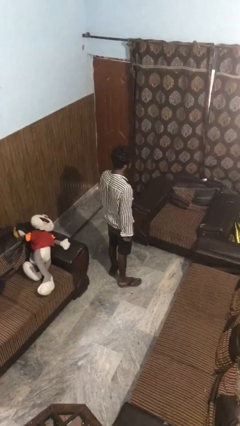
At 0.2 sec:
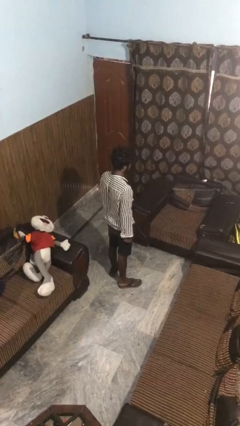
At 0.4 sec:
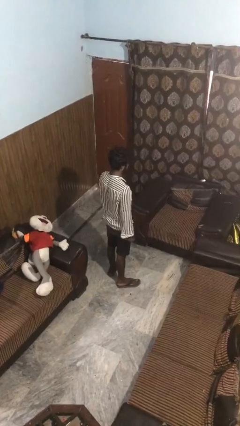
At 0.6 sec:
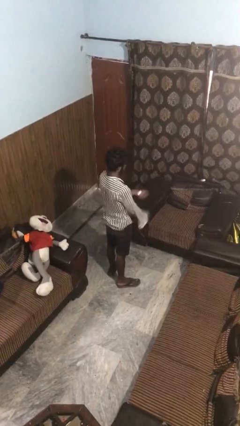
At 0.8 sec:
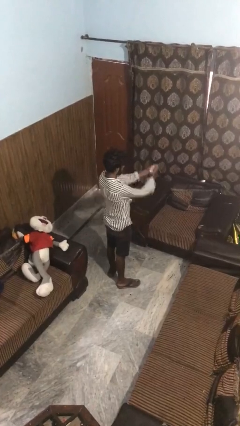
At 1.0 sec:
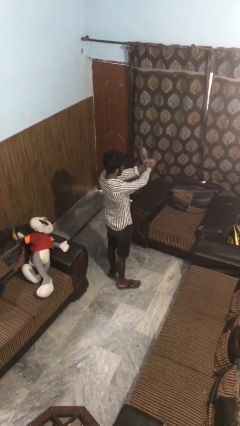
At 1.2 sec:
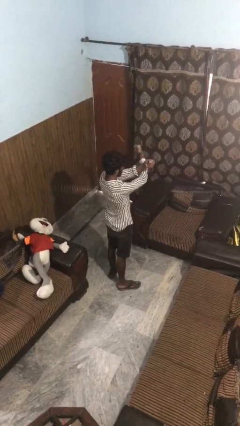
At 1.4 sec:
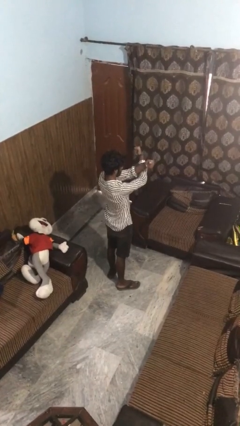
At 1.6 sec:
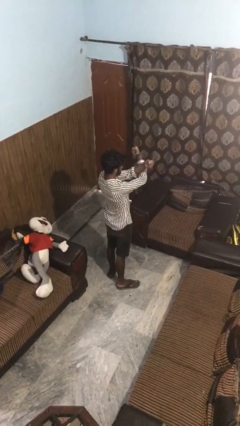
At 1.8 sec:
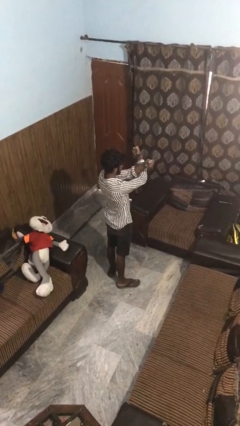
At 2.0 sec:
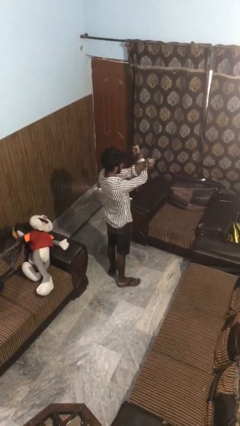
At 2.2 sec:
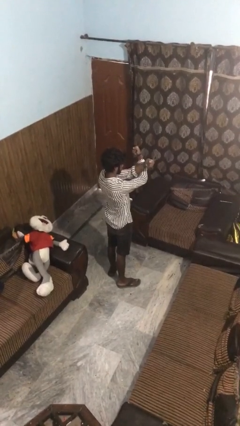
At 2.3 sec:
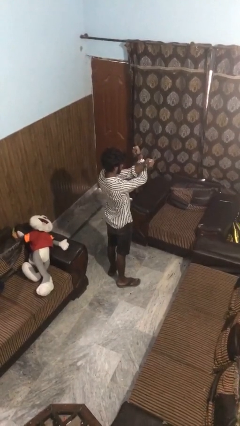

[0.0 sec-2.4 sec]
person gestures arms x

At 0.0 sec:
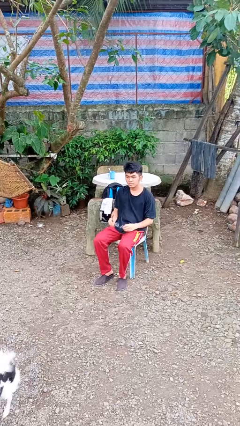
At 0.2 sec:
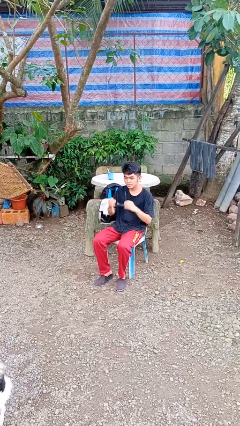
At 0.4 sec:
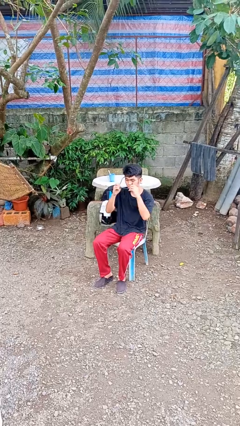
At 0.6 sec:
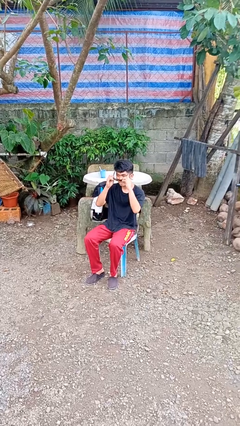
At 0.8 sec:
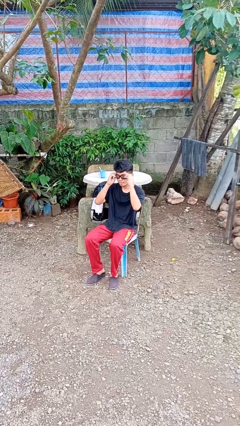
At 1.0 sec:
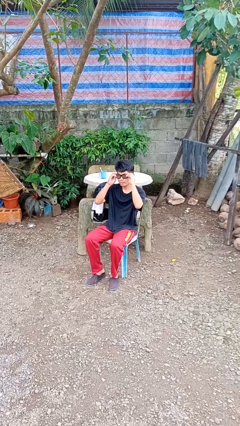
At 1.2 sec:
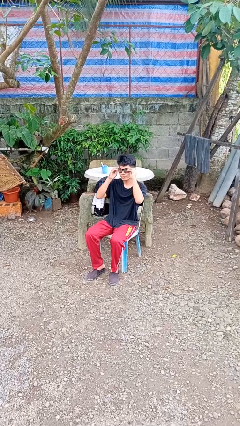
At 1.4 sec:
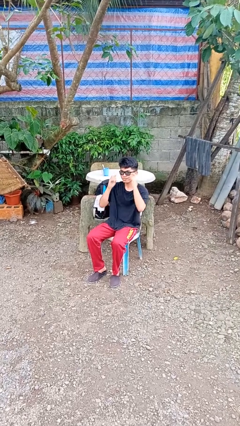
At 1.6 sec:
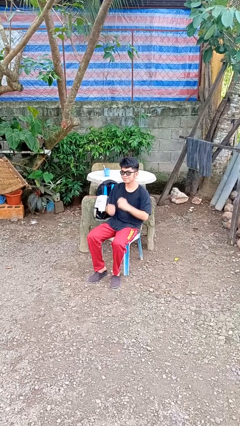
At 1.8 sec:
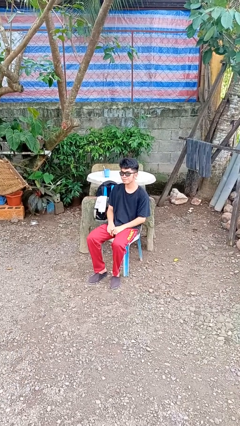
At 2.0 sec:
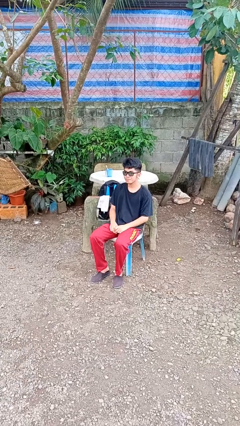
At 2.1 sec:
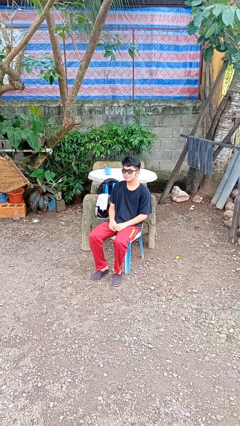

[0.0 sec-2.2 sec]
person puts on sunglasses

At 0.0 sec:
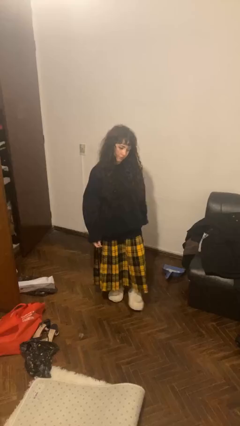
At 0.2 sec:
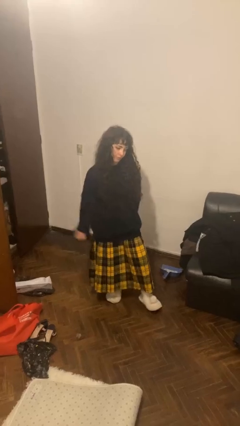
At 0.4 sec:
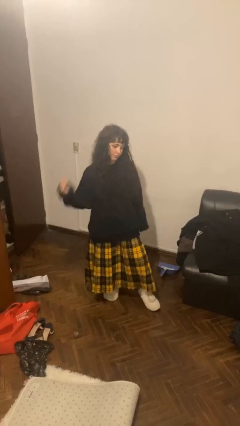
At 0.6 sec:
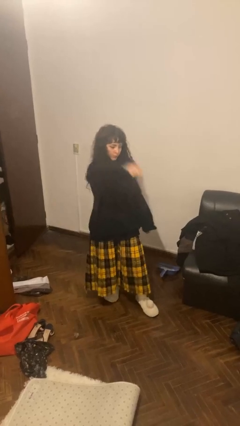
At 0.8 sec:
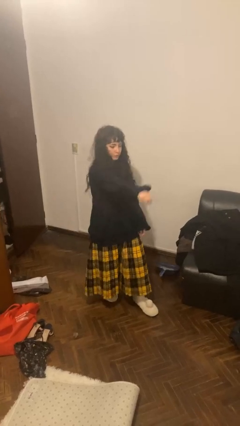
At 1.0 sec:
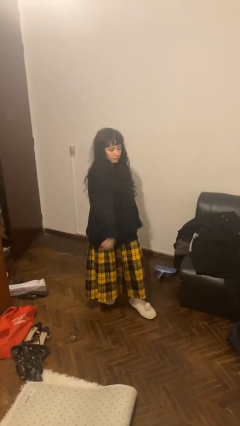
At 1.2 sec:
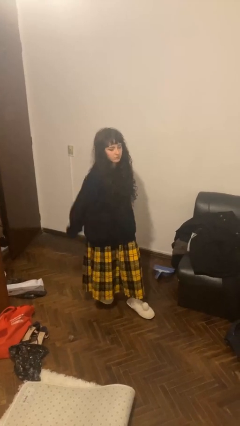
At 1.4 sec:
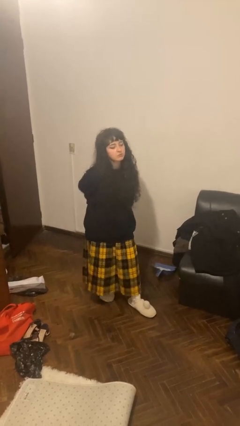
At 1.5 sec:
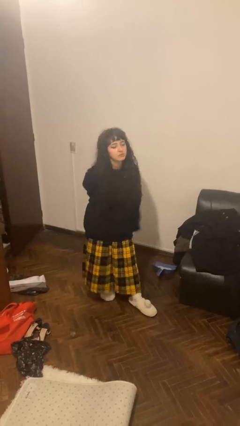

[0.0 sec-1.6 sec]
person punches

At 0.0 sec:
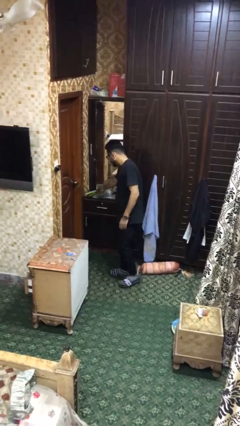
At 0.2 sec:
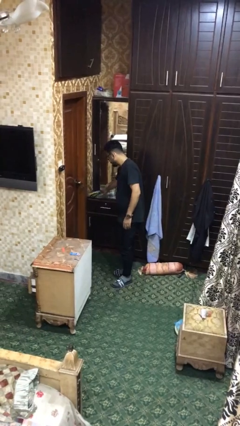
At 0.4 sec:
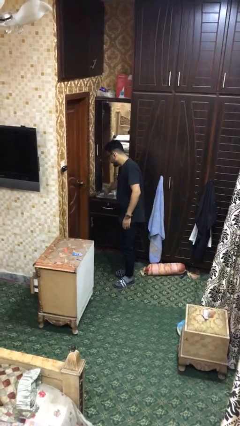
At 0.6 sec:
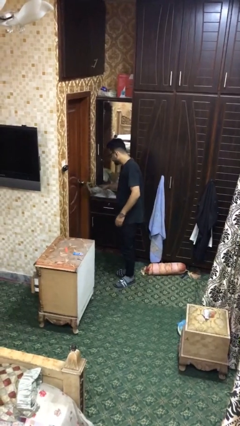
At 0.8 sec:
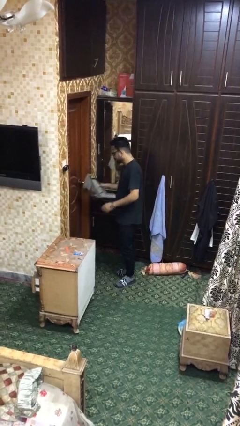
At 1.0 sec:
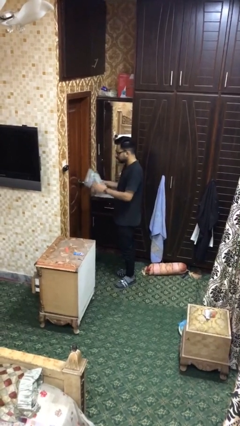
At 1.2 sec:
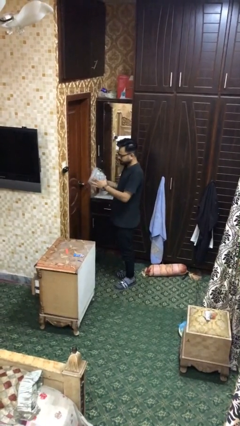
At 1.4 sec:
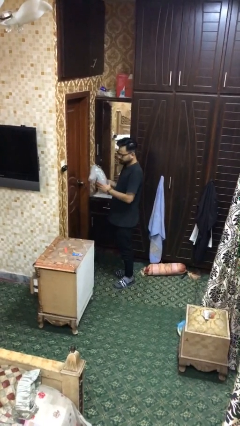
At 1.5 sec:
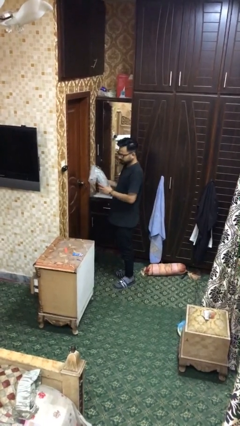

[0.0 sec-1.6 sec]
person picks up object from shelf

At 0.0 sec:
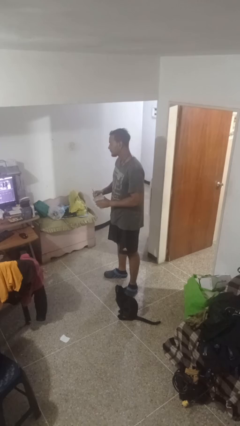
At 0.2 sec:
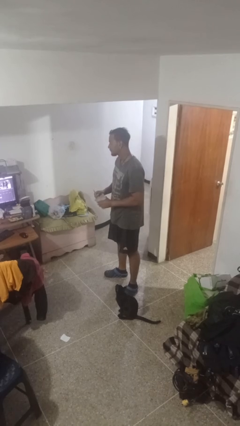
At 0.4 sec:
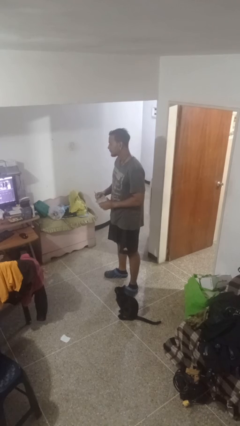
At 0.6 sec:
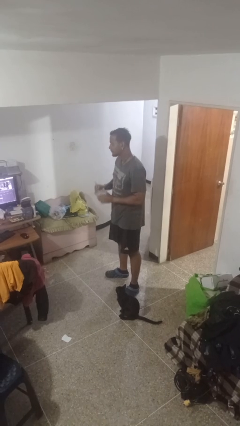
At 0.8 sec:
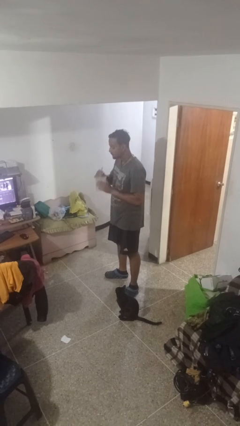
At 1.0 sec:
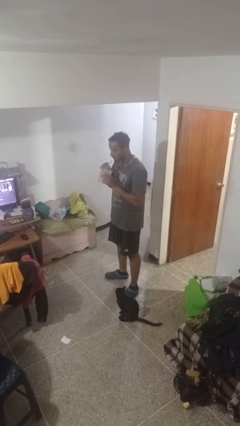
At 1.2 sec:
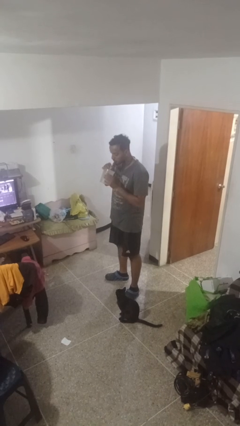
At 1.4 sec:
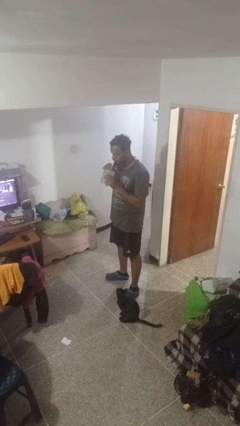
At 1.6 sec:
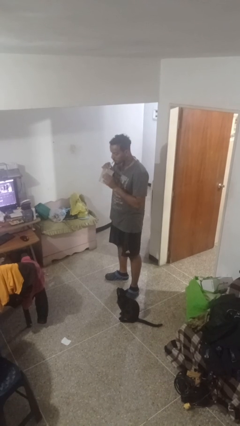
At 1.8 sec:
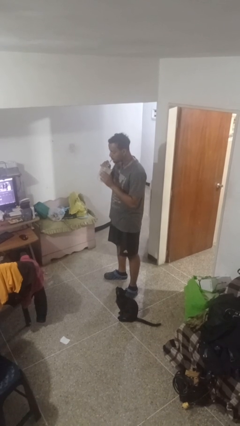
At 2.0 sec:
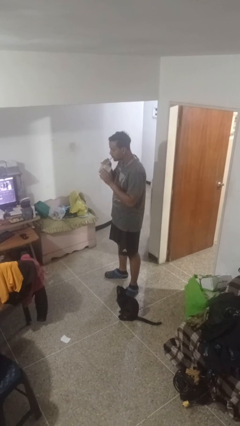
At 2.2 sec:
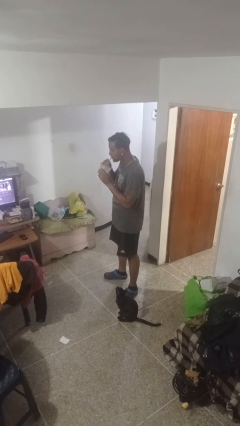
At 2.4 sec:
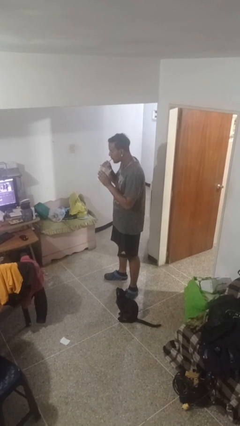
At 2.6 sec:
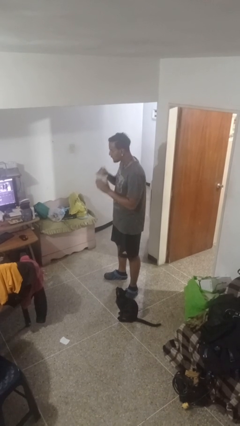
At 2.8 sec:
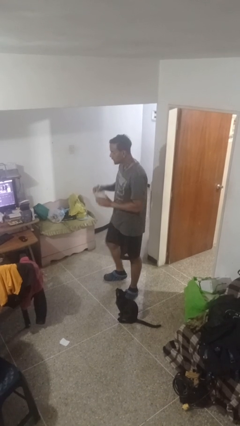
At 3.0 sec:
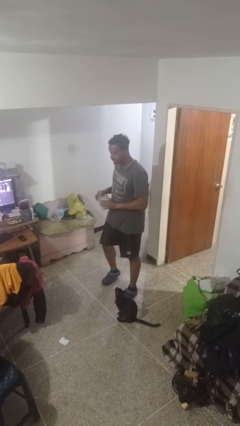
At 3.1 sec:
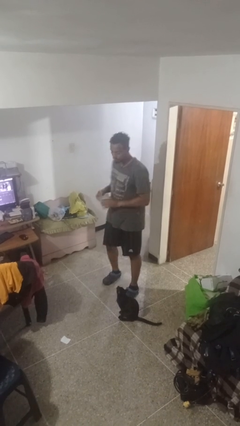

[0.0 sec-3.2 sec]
person drinks from straw

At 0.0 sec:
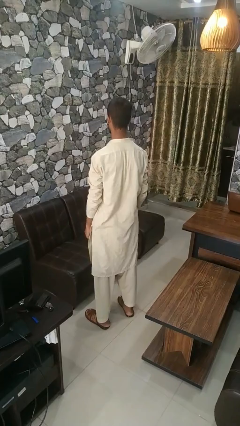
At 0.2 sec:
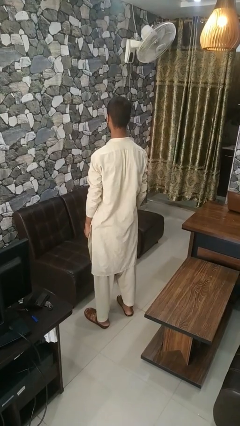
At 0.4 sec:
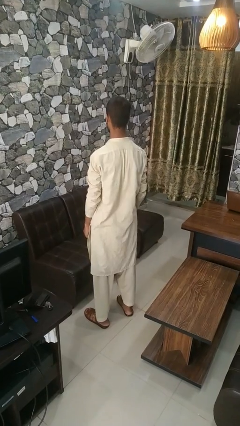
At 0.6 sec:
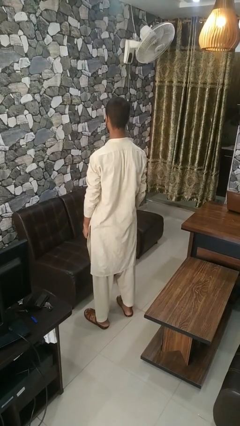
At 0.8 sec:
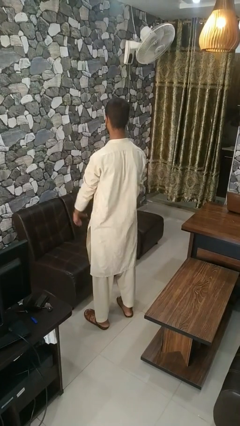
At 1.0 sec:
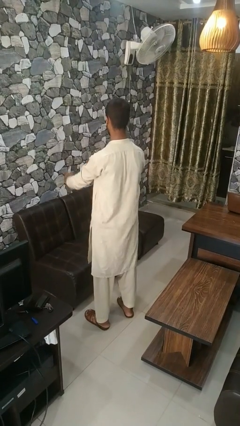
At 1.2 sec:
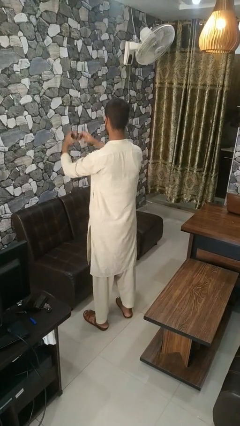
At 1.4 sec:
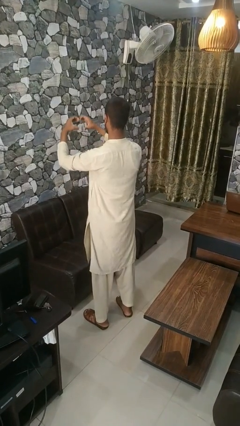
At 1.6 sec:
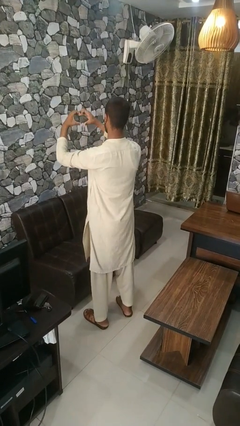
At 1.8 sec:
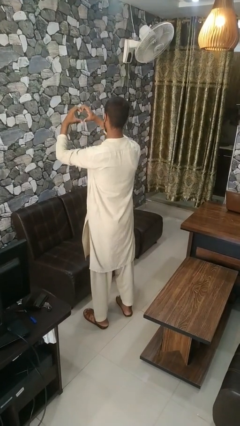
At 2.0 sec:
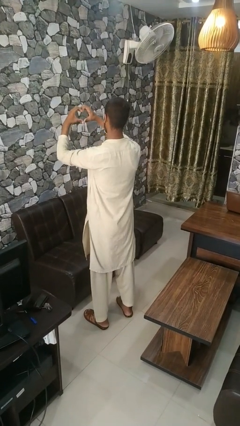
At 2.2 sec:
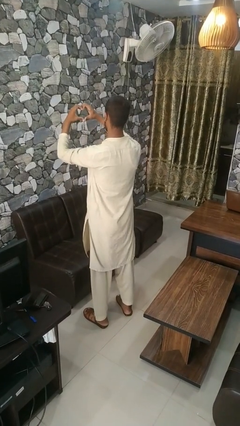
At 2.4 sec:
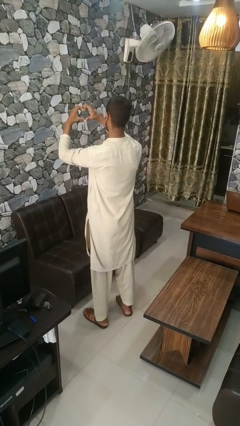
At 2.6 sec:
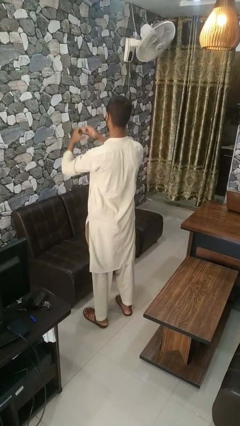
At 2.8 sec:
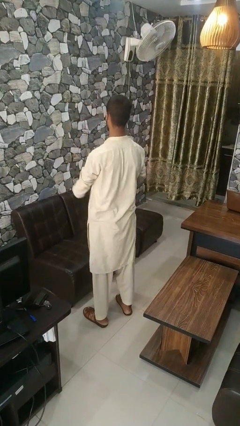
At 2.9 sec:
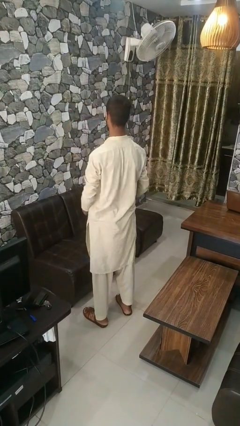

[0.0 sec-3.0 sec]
person gestures heart

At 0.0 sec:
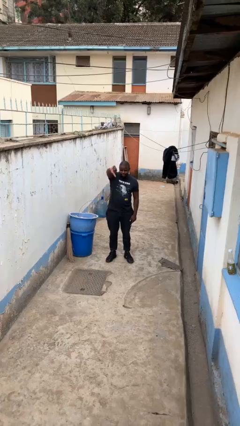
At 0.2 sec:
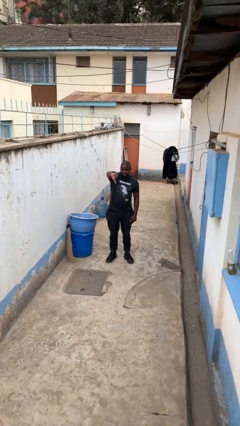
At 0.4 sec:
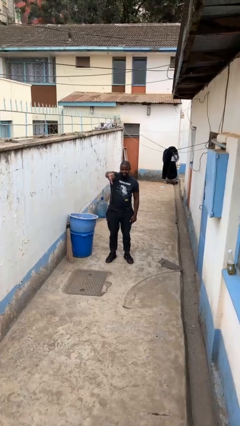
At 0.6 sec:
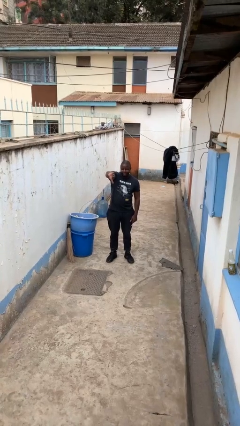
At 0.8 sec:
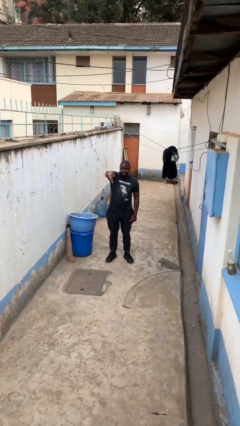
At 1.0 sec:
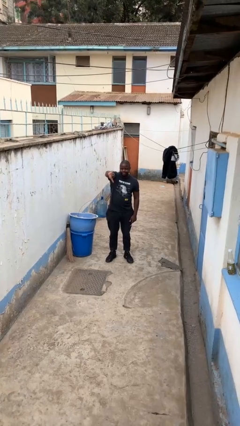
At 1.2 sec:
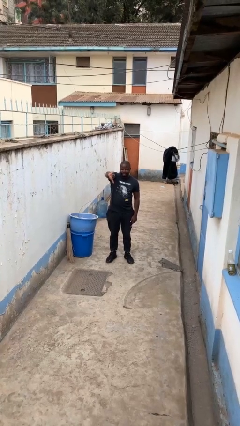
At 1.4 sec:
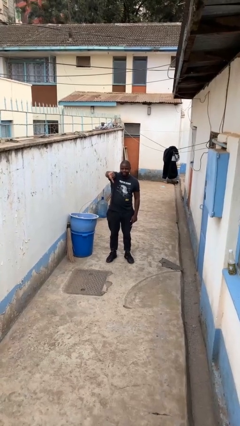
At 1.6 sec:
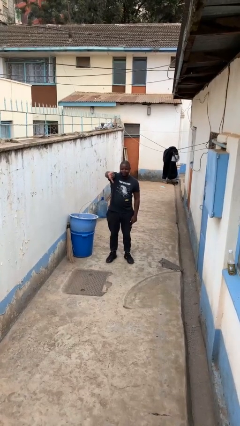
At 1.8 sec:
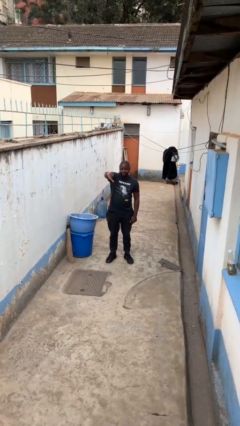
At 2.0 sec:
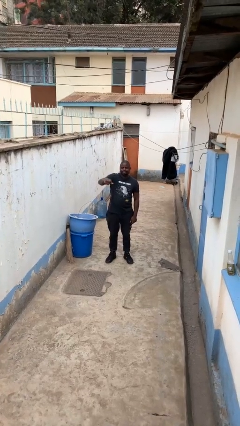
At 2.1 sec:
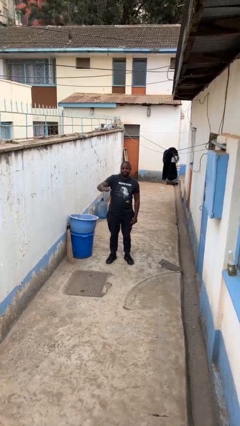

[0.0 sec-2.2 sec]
person gestures thumbs down

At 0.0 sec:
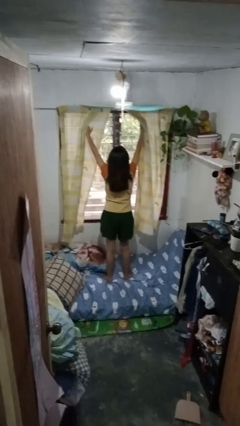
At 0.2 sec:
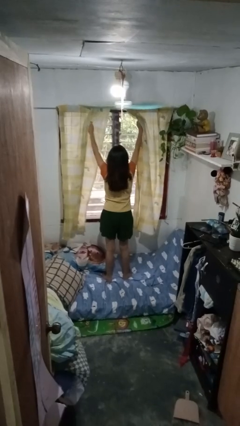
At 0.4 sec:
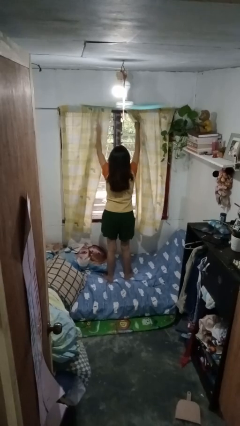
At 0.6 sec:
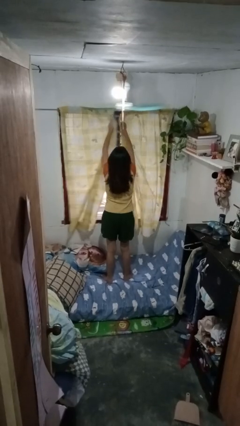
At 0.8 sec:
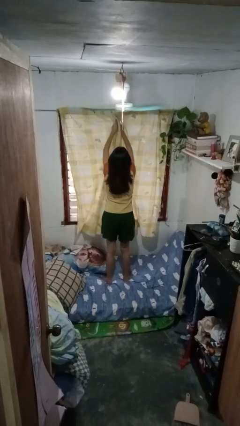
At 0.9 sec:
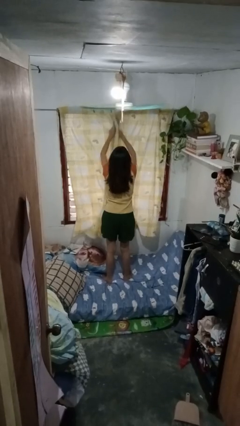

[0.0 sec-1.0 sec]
person closes curtains
